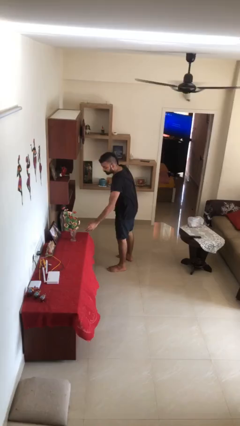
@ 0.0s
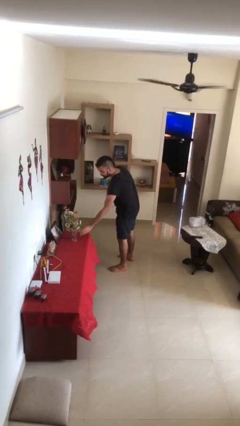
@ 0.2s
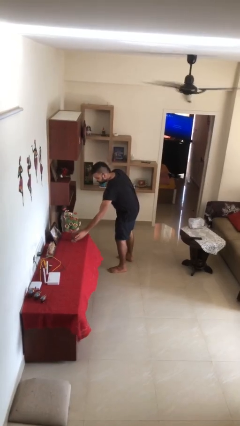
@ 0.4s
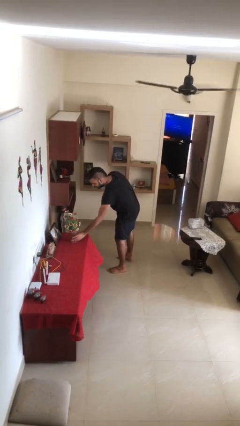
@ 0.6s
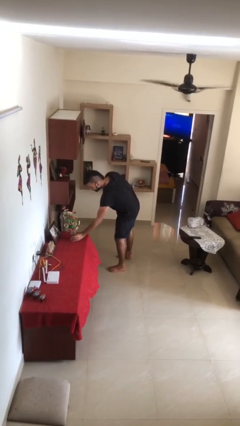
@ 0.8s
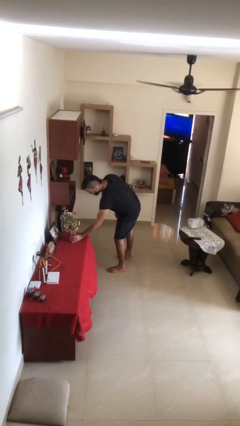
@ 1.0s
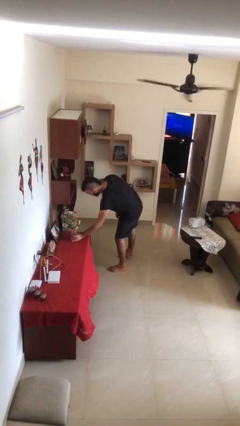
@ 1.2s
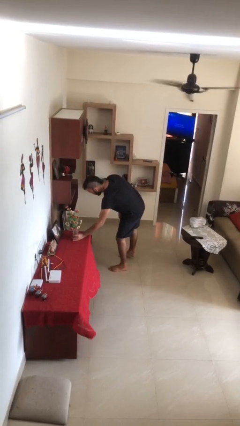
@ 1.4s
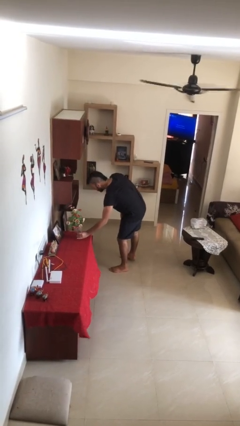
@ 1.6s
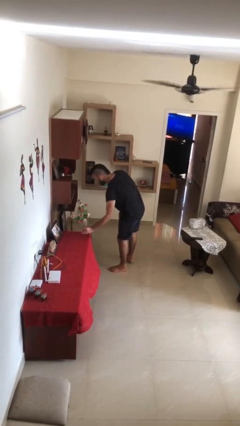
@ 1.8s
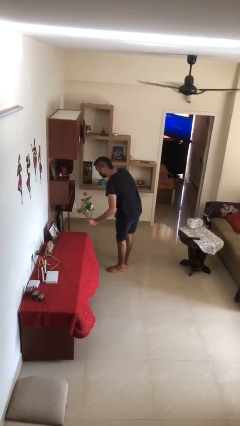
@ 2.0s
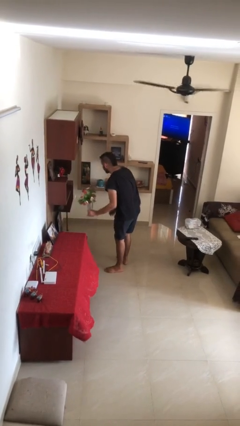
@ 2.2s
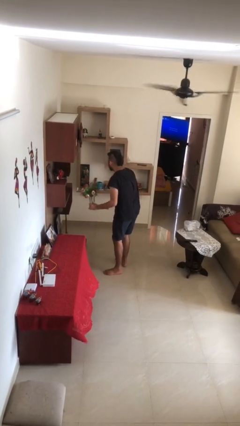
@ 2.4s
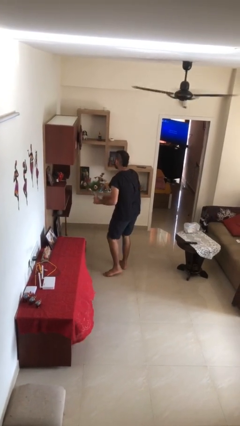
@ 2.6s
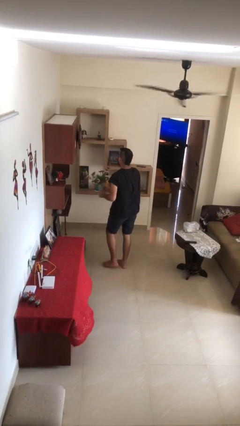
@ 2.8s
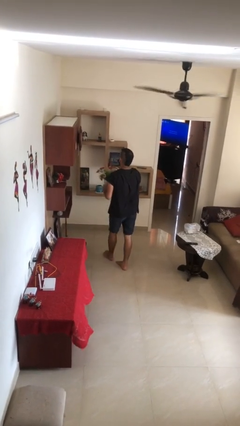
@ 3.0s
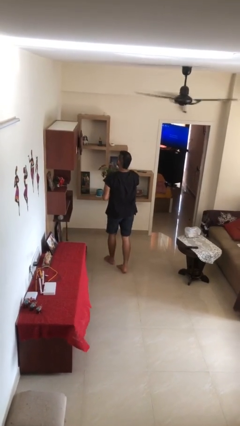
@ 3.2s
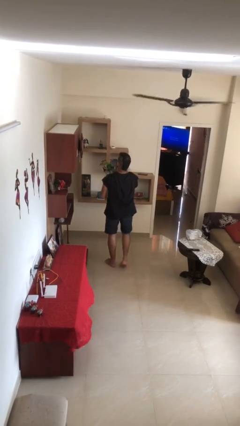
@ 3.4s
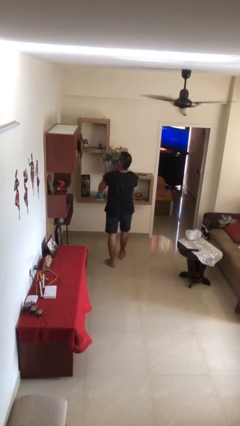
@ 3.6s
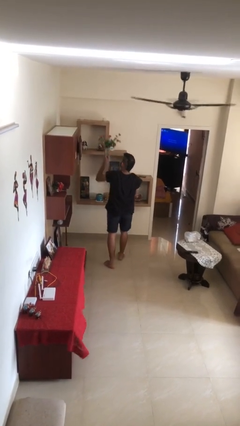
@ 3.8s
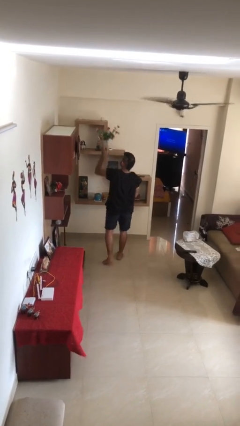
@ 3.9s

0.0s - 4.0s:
person picks up object from table

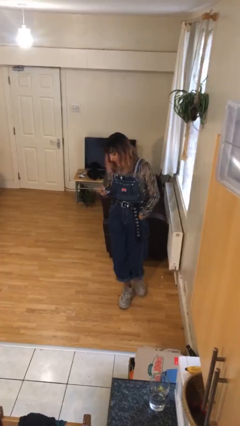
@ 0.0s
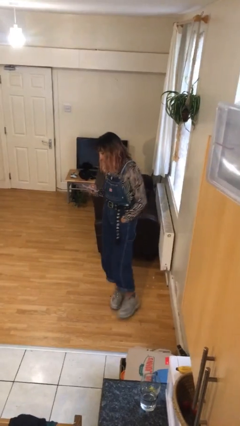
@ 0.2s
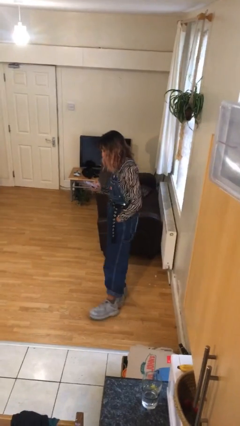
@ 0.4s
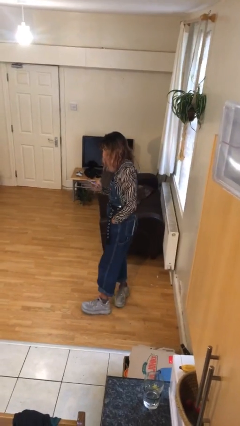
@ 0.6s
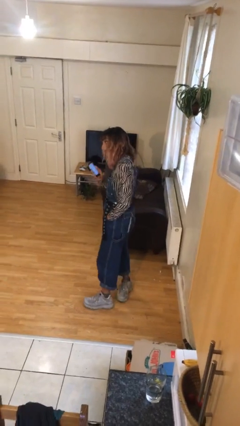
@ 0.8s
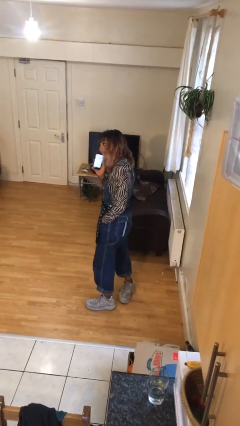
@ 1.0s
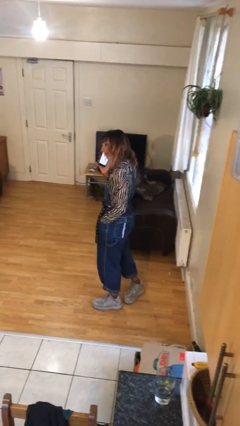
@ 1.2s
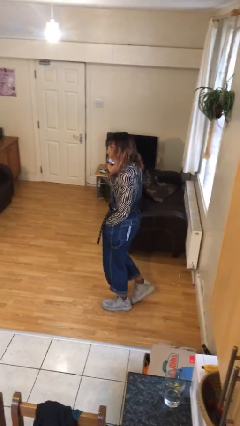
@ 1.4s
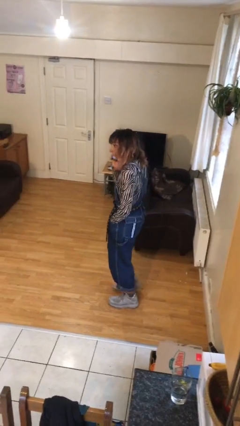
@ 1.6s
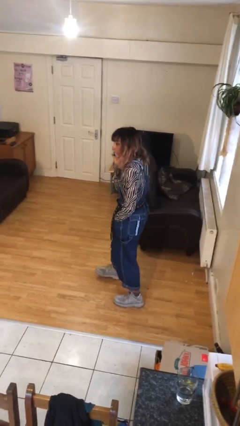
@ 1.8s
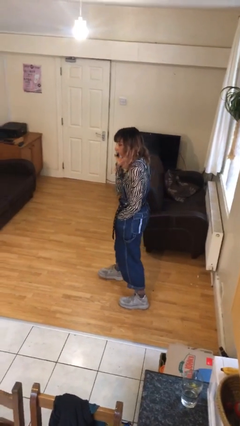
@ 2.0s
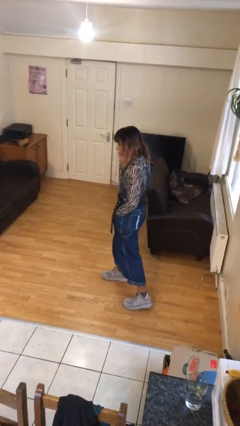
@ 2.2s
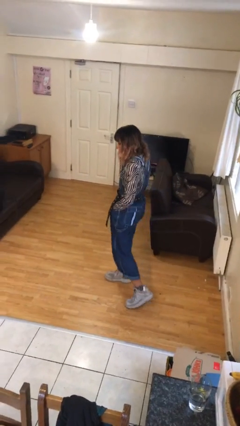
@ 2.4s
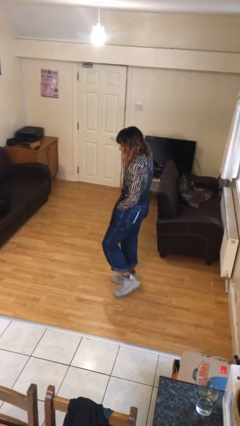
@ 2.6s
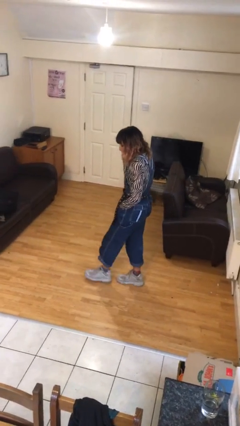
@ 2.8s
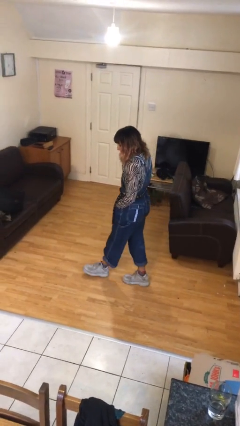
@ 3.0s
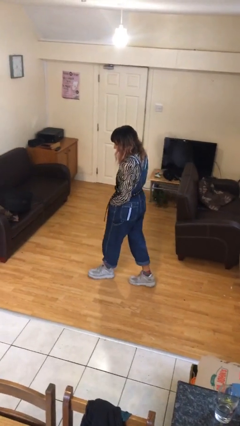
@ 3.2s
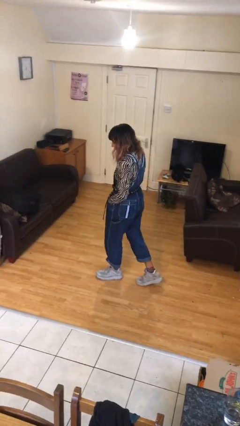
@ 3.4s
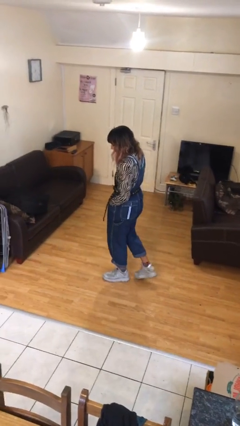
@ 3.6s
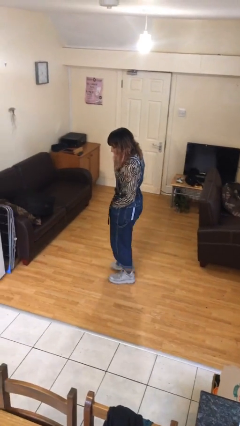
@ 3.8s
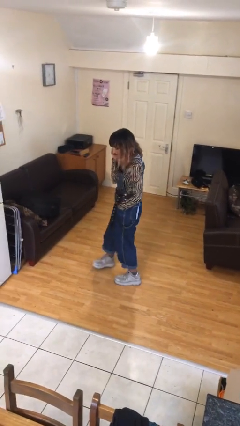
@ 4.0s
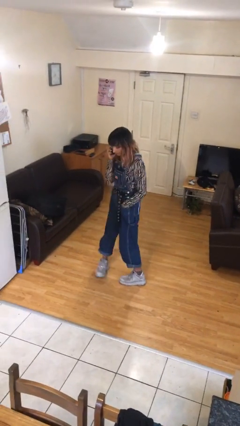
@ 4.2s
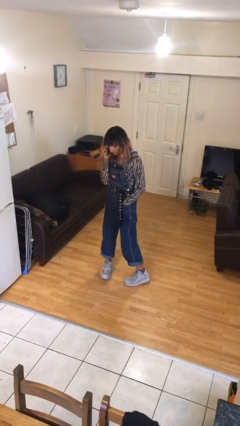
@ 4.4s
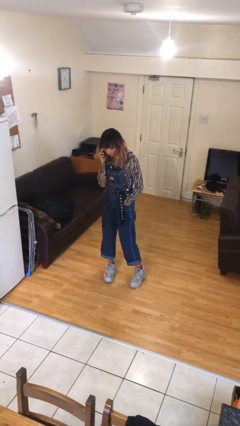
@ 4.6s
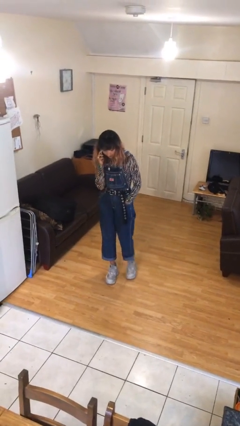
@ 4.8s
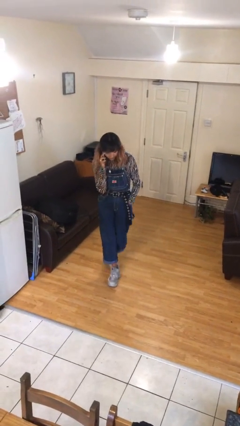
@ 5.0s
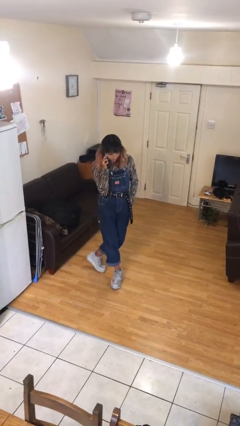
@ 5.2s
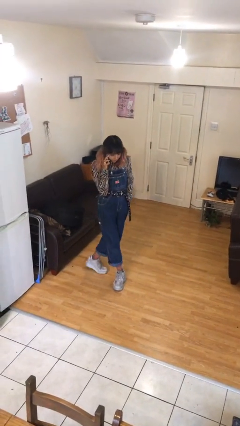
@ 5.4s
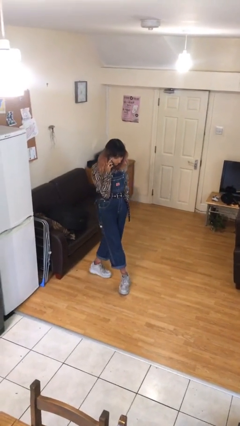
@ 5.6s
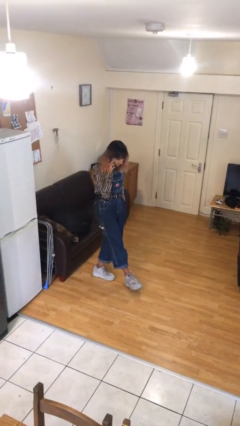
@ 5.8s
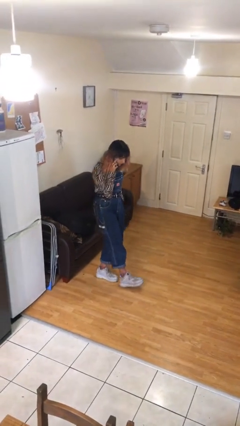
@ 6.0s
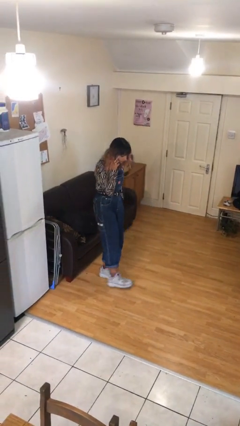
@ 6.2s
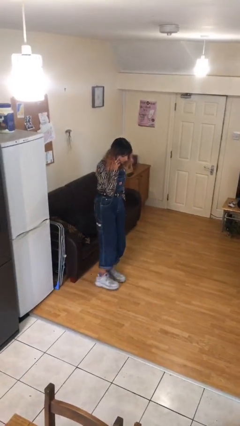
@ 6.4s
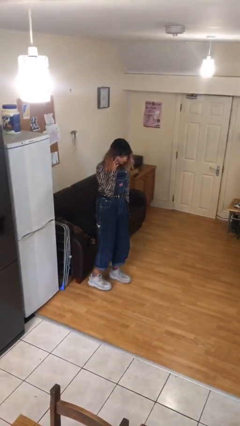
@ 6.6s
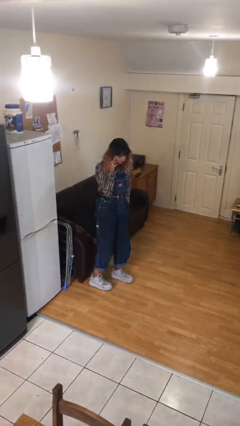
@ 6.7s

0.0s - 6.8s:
person talks on phone

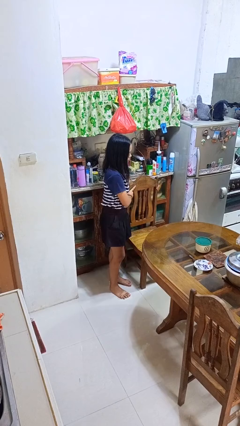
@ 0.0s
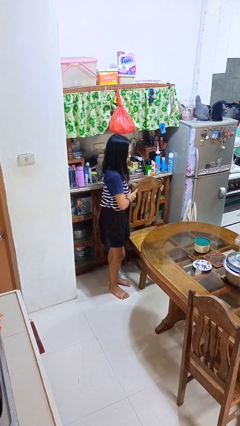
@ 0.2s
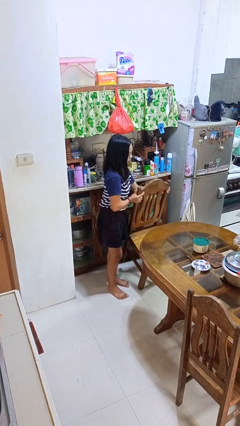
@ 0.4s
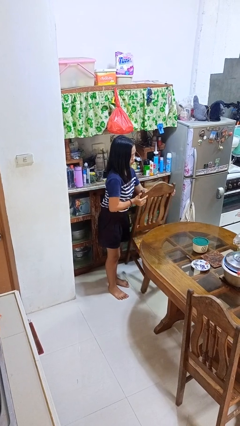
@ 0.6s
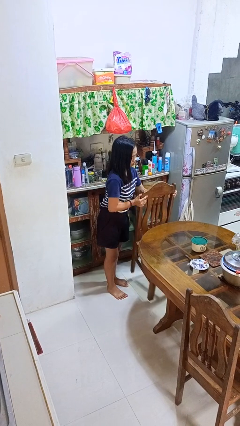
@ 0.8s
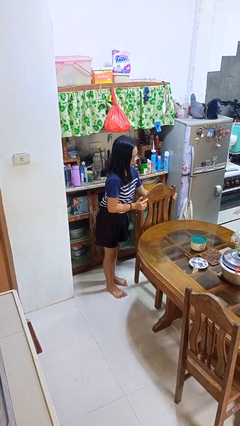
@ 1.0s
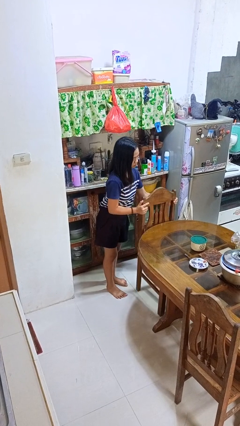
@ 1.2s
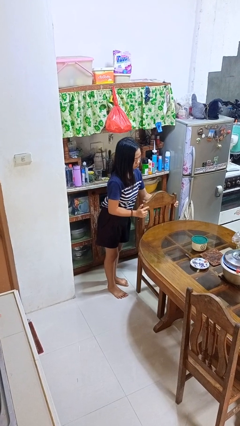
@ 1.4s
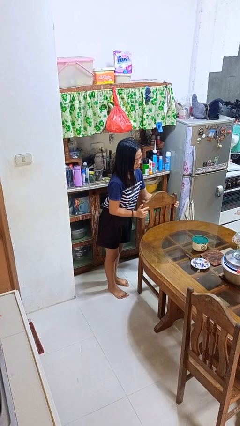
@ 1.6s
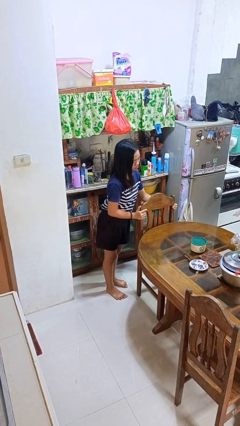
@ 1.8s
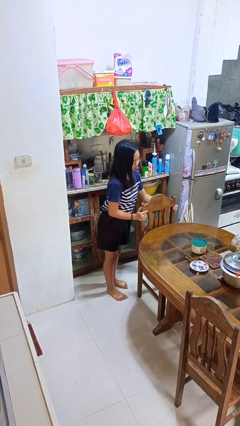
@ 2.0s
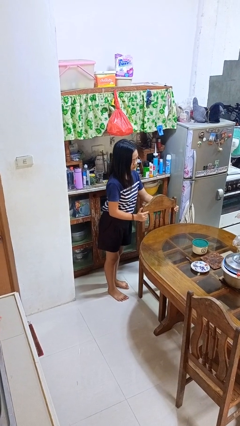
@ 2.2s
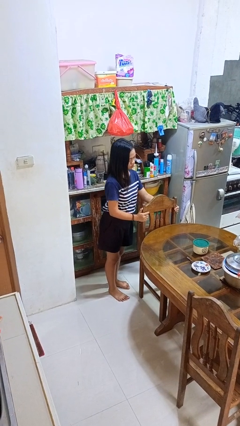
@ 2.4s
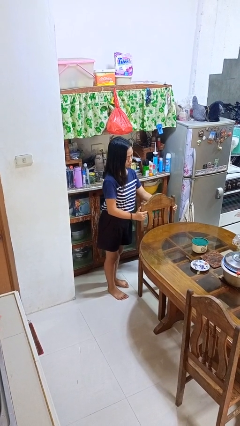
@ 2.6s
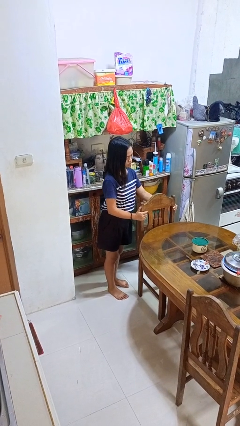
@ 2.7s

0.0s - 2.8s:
person pushes in chair

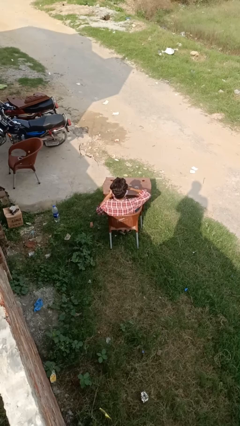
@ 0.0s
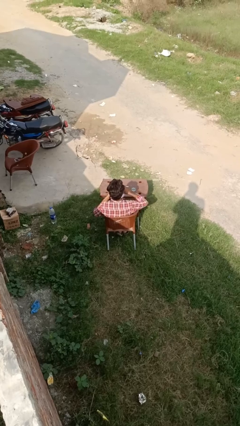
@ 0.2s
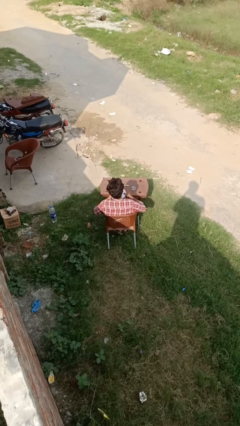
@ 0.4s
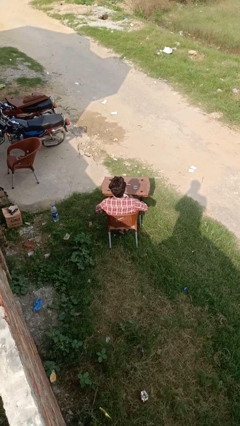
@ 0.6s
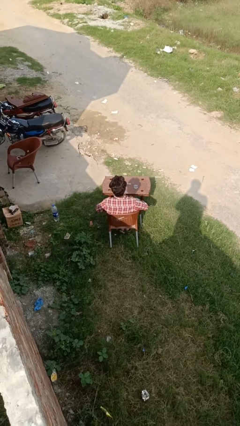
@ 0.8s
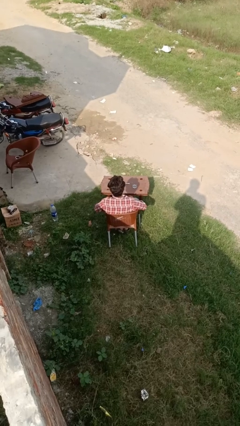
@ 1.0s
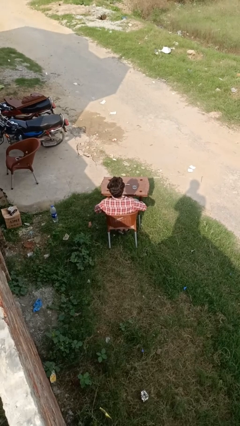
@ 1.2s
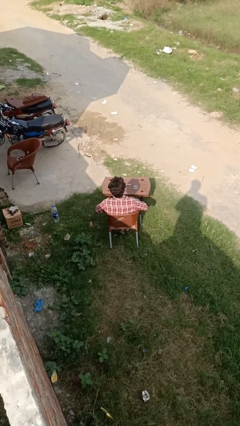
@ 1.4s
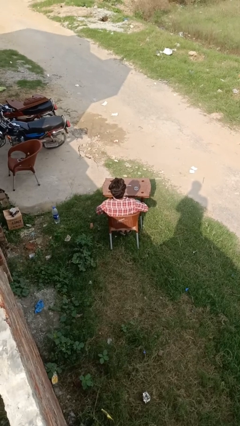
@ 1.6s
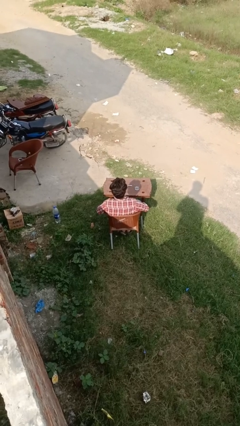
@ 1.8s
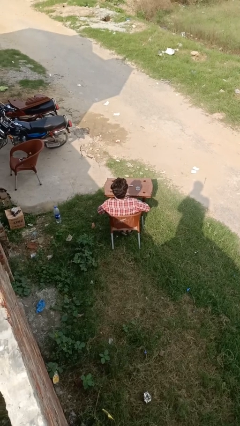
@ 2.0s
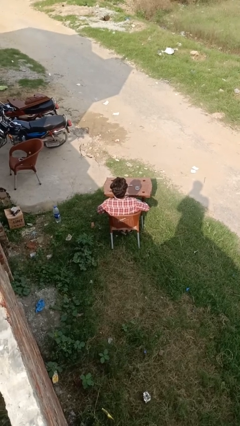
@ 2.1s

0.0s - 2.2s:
person eats with hands

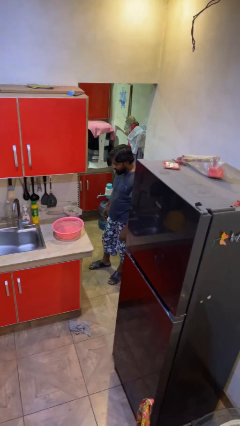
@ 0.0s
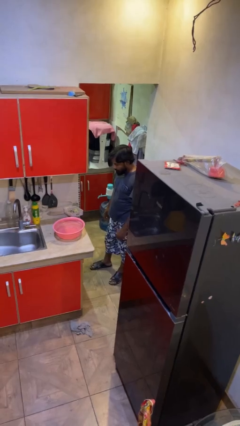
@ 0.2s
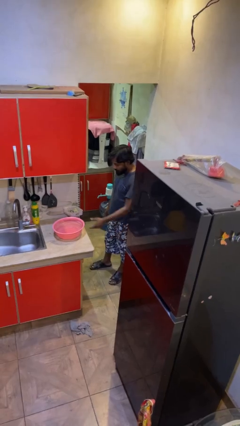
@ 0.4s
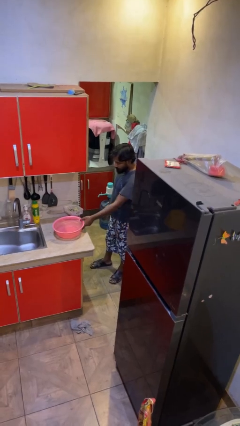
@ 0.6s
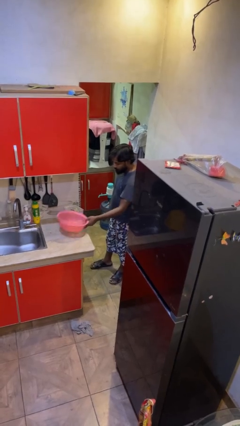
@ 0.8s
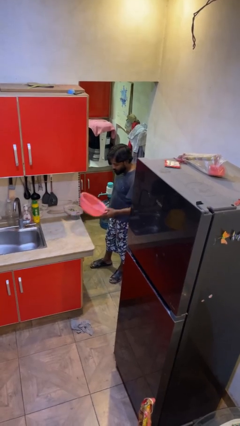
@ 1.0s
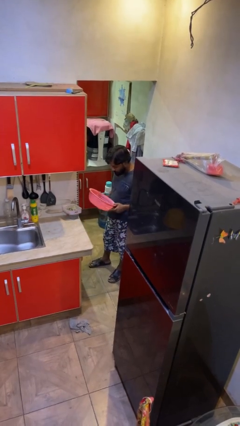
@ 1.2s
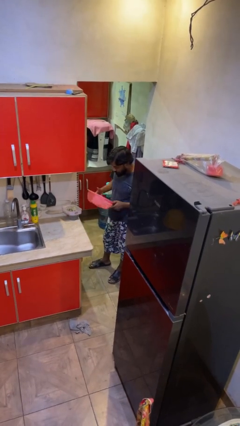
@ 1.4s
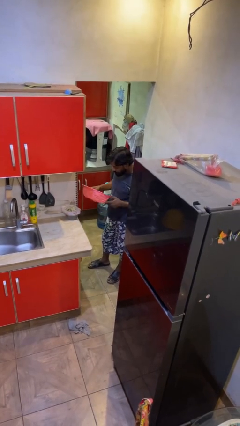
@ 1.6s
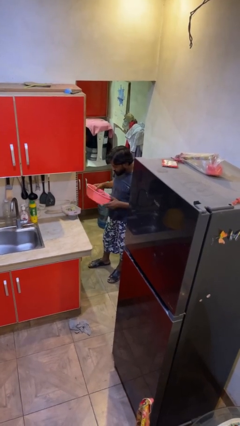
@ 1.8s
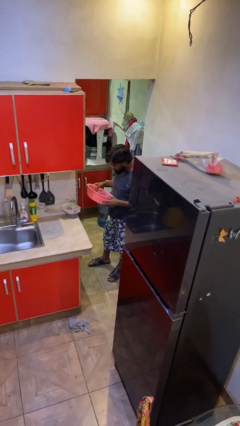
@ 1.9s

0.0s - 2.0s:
person picks up object from countertop
